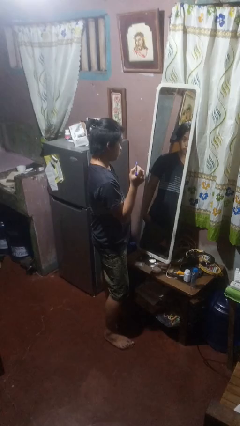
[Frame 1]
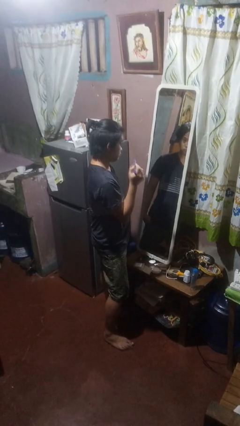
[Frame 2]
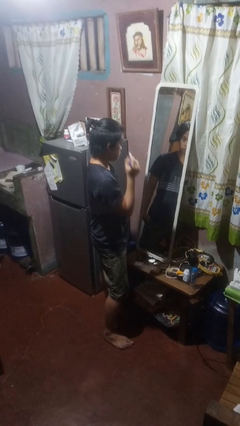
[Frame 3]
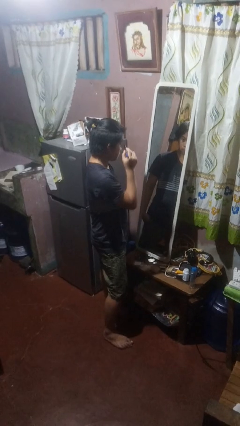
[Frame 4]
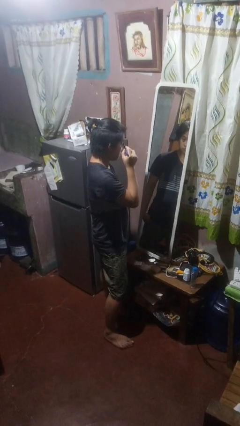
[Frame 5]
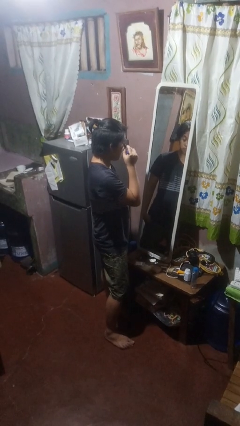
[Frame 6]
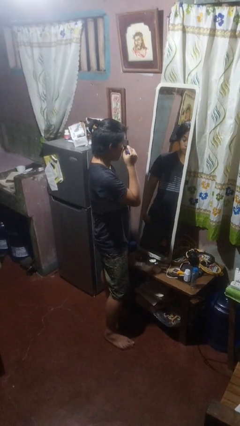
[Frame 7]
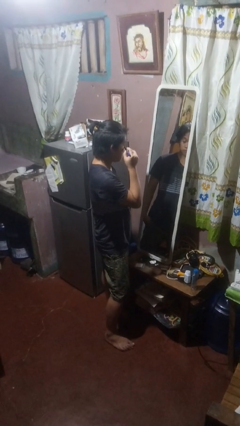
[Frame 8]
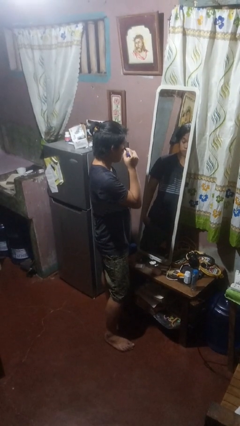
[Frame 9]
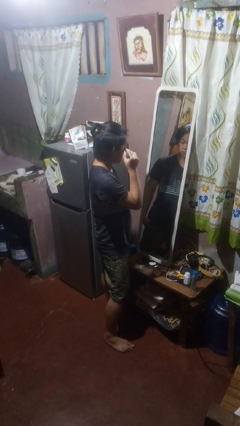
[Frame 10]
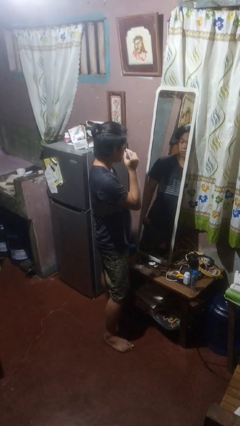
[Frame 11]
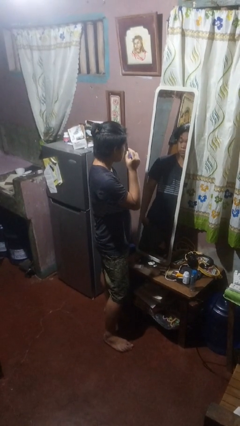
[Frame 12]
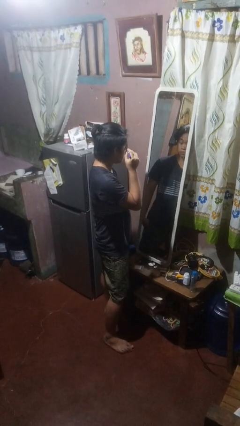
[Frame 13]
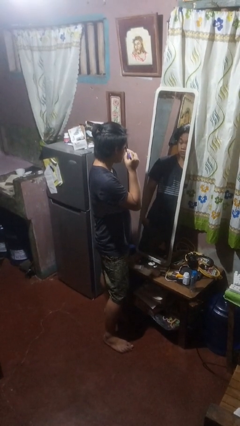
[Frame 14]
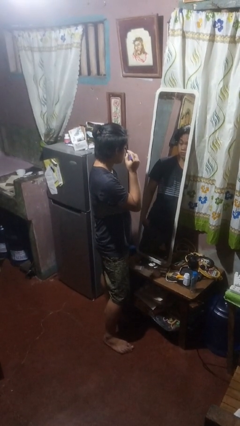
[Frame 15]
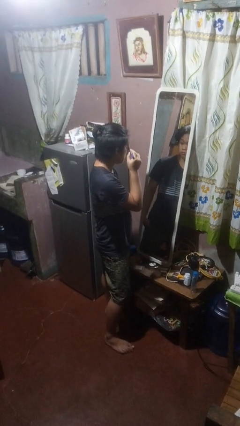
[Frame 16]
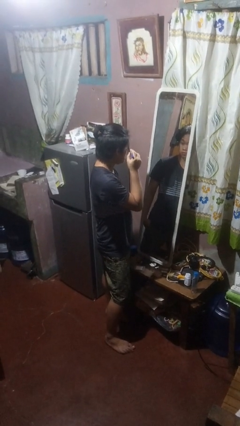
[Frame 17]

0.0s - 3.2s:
person applies eye makeup

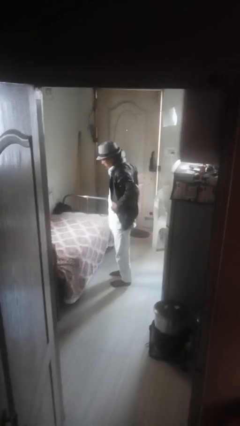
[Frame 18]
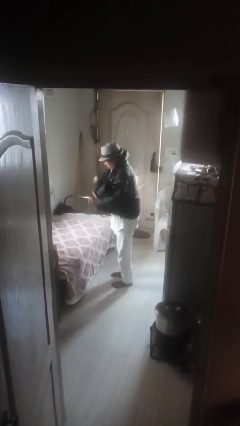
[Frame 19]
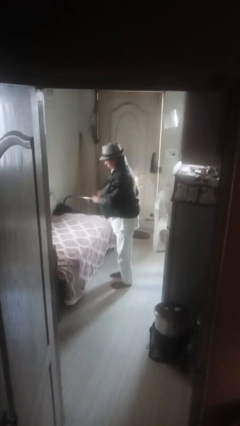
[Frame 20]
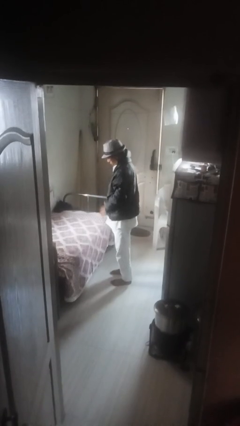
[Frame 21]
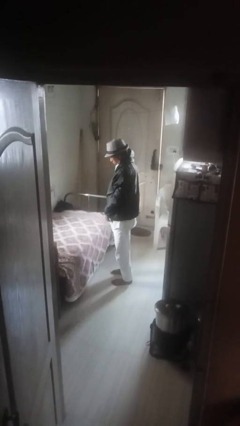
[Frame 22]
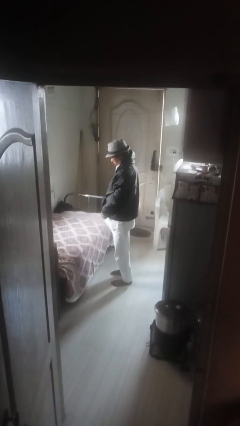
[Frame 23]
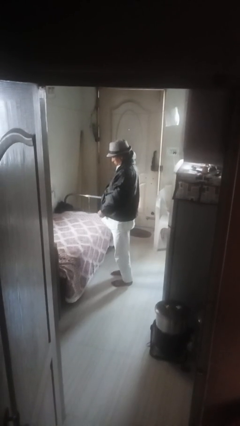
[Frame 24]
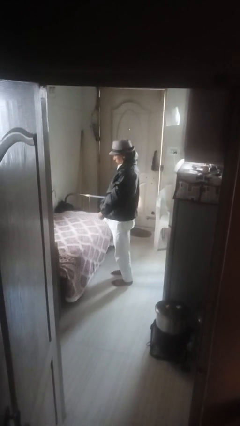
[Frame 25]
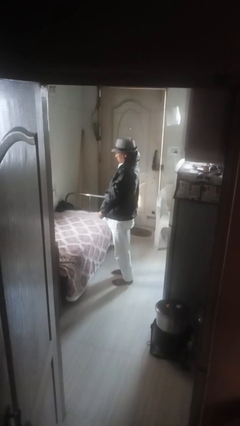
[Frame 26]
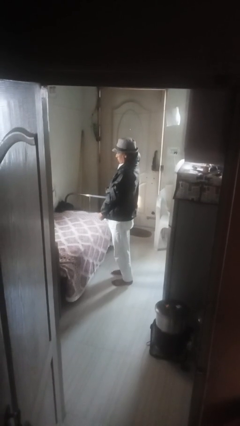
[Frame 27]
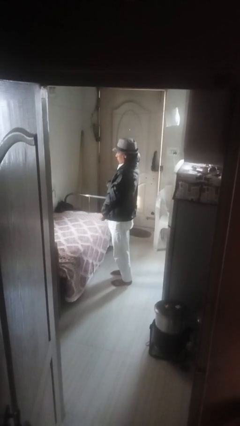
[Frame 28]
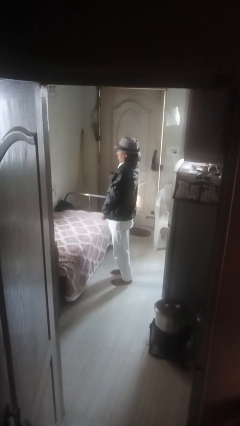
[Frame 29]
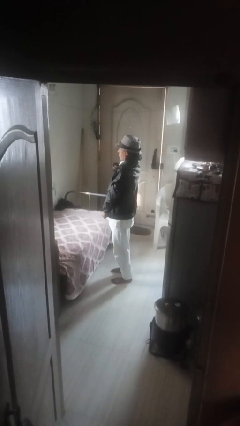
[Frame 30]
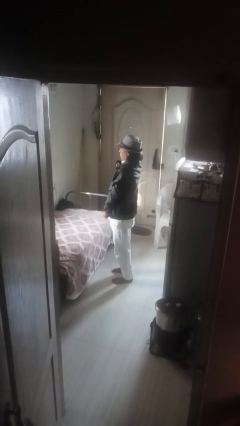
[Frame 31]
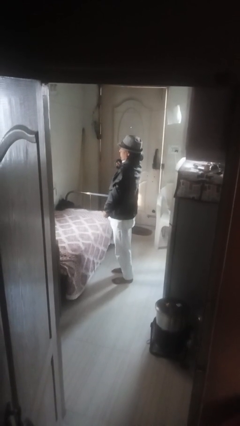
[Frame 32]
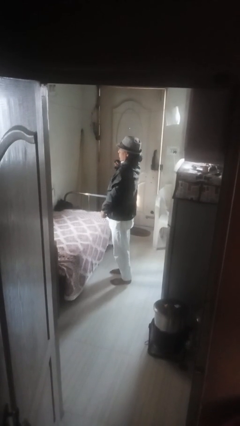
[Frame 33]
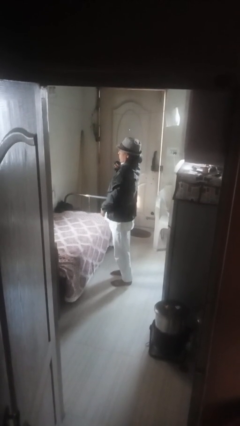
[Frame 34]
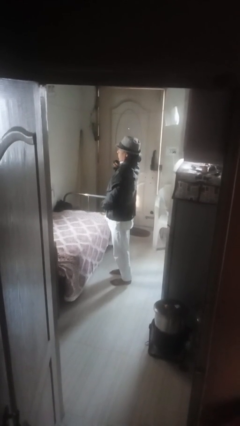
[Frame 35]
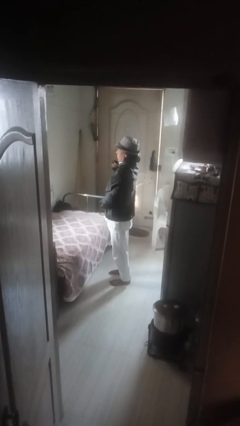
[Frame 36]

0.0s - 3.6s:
person zips up jacket

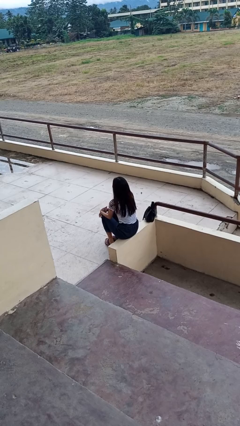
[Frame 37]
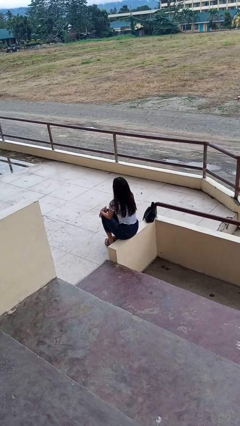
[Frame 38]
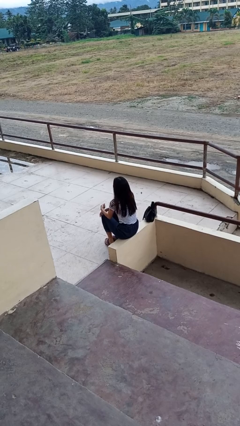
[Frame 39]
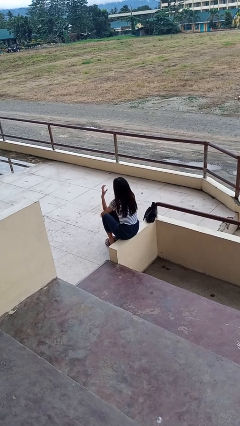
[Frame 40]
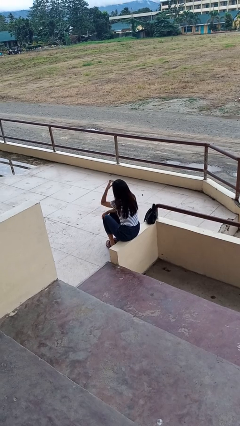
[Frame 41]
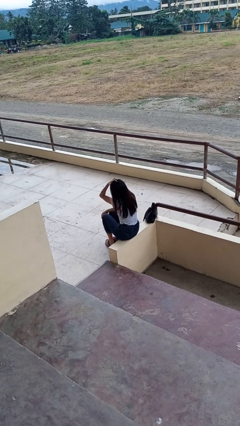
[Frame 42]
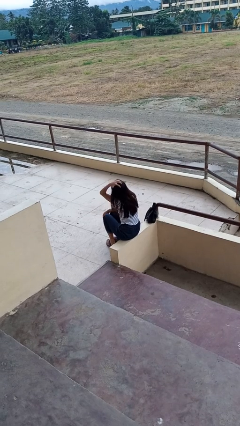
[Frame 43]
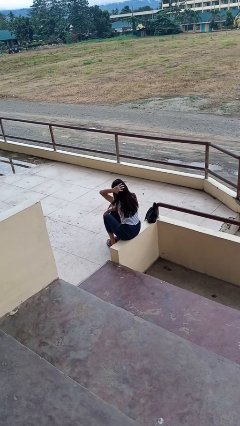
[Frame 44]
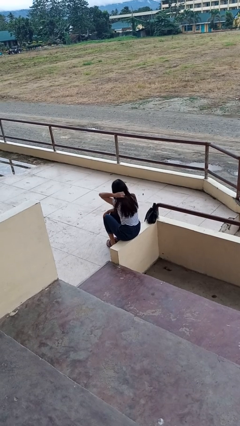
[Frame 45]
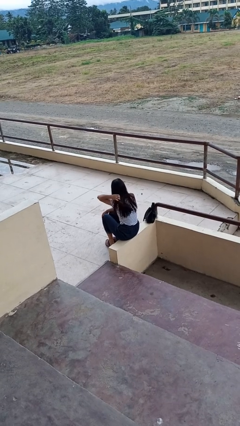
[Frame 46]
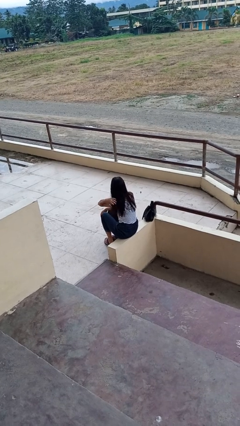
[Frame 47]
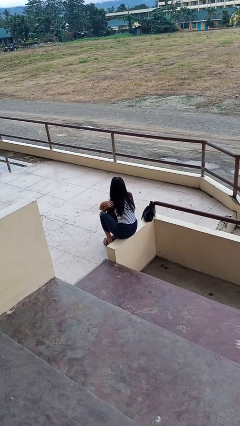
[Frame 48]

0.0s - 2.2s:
person strokes hair

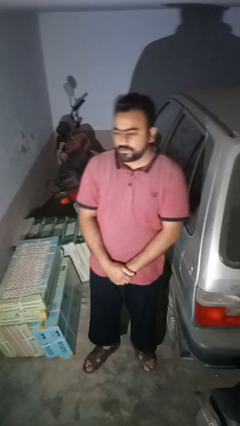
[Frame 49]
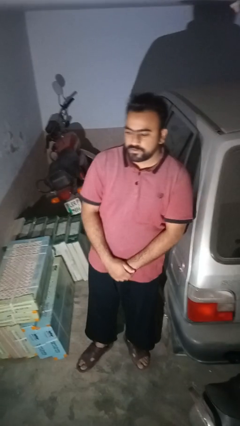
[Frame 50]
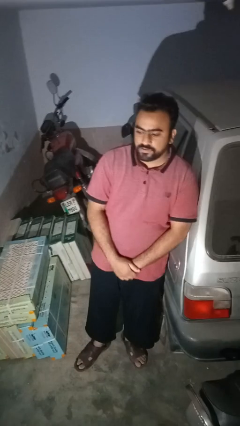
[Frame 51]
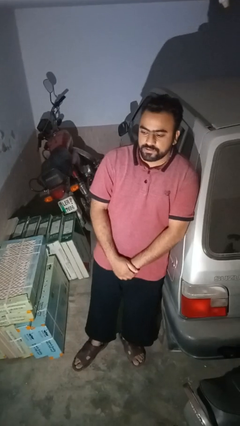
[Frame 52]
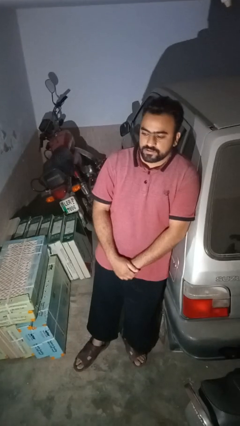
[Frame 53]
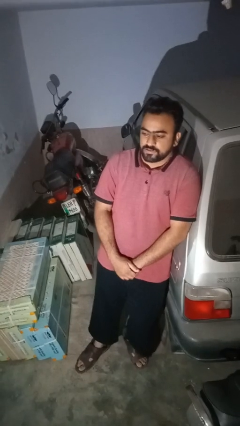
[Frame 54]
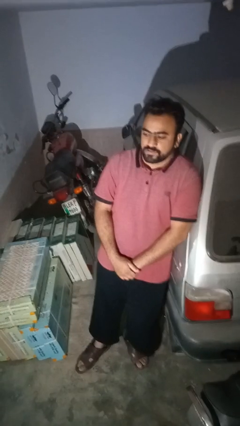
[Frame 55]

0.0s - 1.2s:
person leans against car

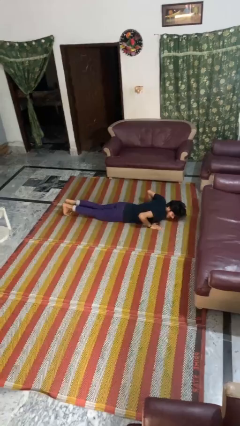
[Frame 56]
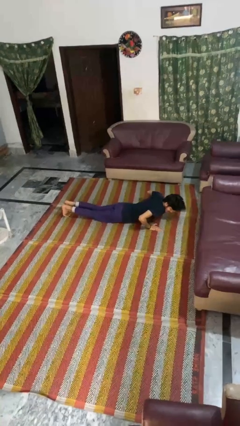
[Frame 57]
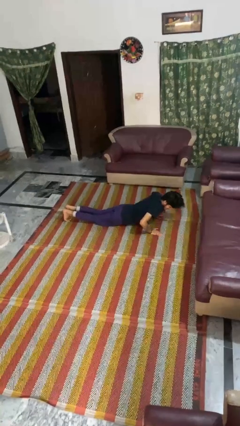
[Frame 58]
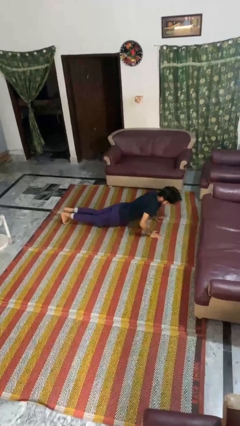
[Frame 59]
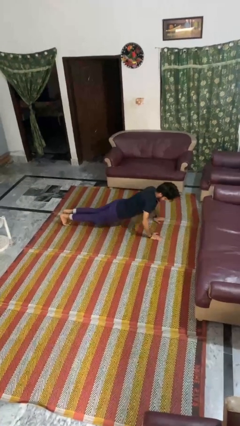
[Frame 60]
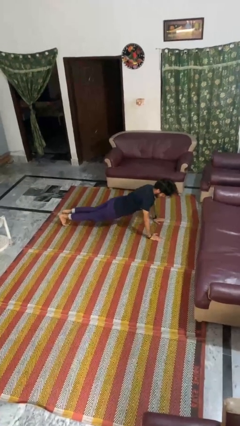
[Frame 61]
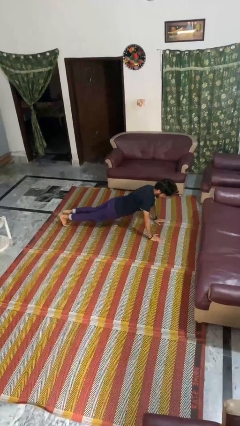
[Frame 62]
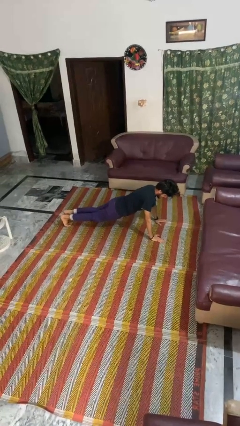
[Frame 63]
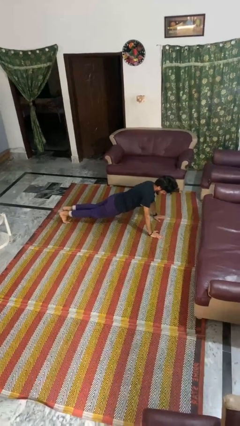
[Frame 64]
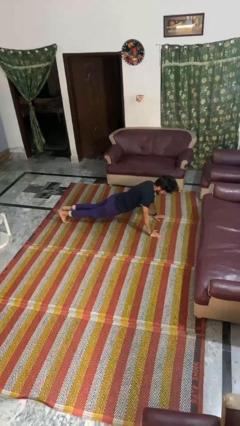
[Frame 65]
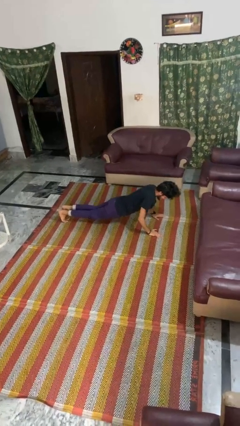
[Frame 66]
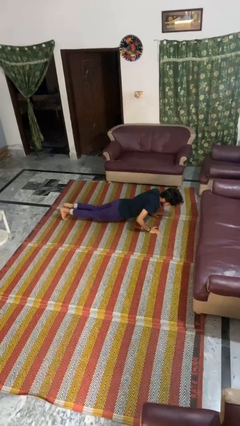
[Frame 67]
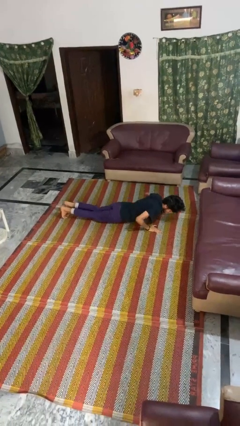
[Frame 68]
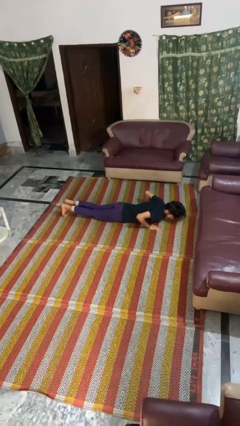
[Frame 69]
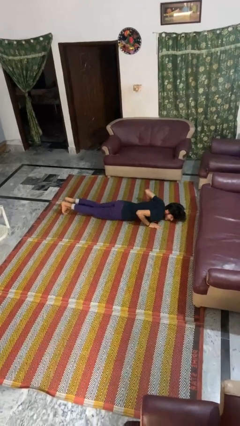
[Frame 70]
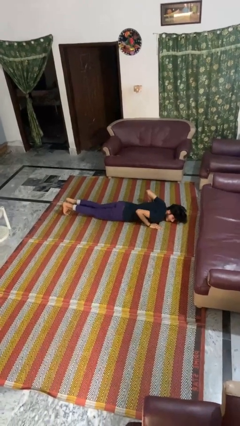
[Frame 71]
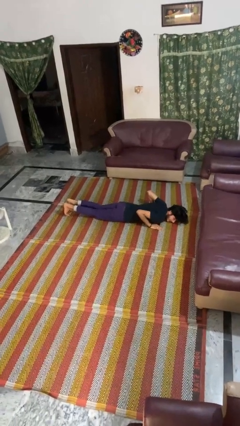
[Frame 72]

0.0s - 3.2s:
person exercises with pushup

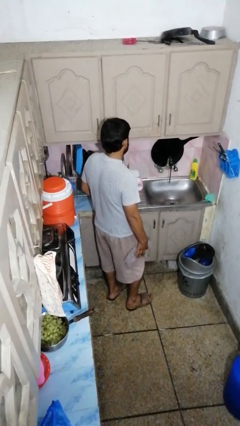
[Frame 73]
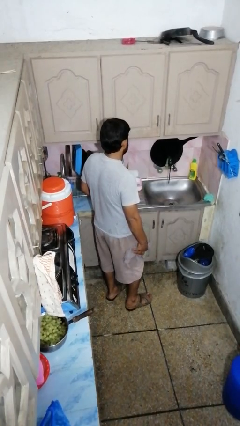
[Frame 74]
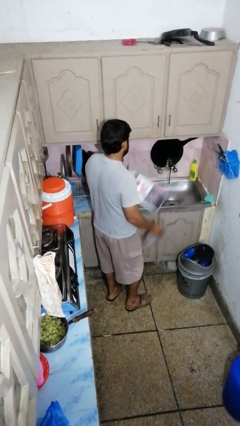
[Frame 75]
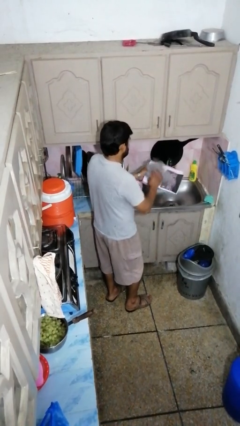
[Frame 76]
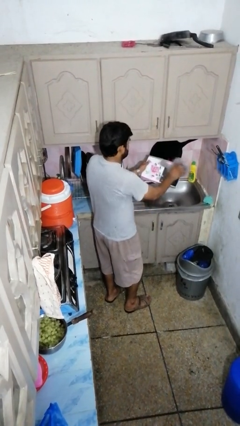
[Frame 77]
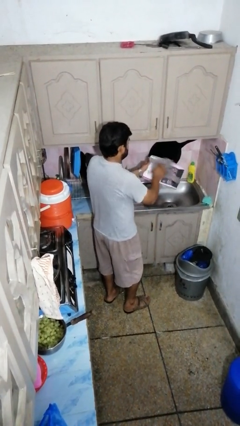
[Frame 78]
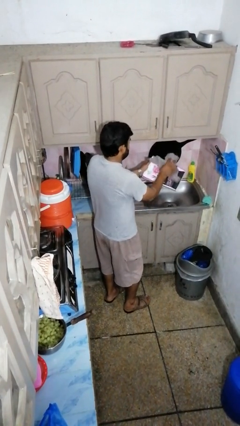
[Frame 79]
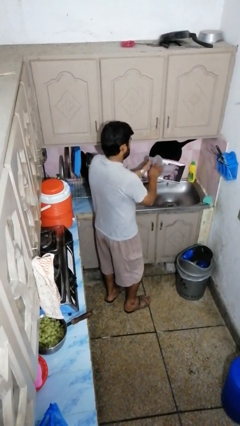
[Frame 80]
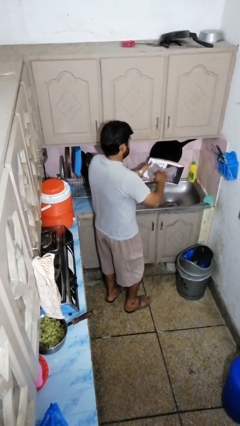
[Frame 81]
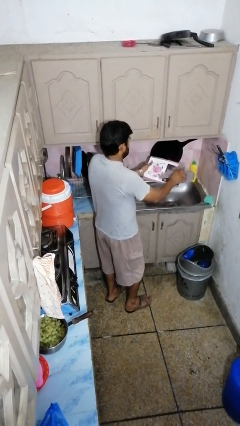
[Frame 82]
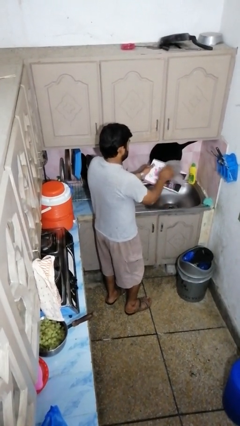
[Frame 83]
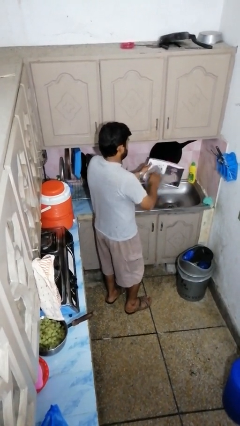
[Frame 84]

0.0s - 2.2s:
person dries dish

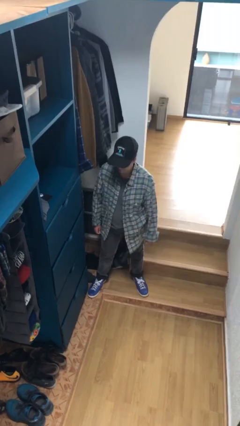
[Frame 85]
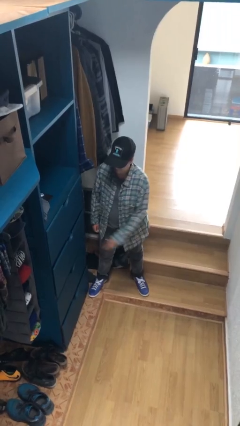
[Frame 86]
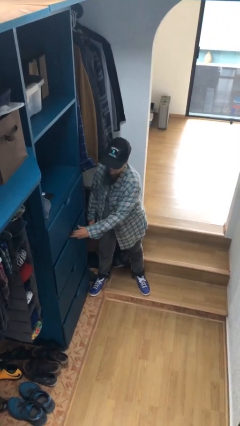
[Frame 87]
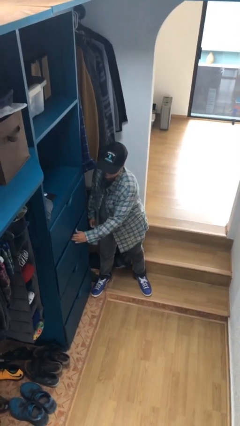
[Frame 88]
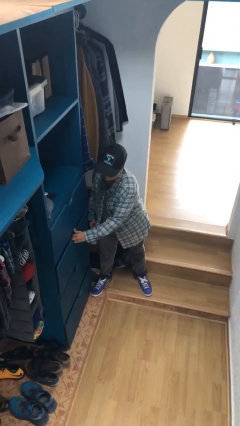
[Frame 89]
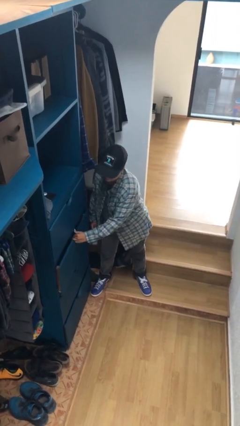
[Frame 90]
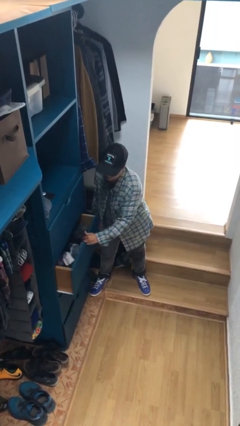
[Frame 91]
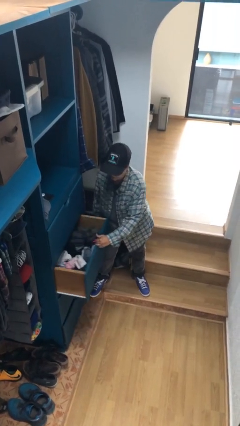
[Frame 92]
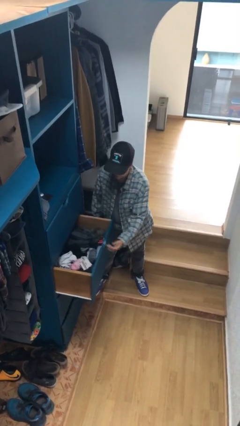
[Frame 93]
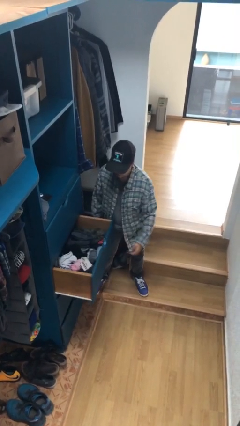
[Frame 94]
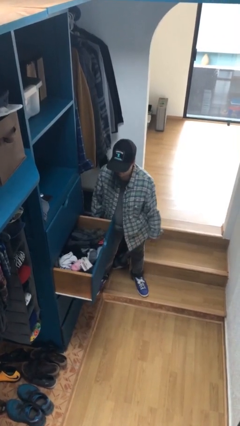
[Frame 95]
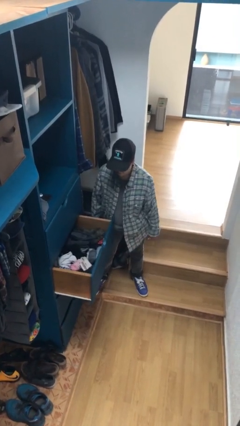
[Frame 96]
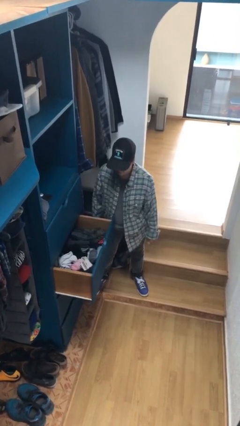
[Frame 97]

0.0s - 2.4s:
person opens dresser drawer
